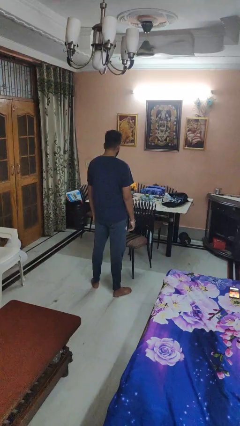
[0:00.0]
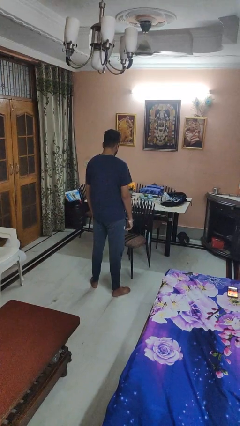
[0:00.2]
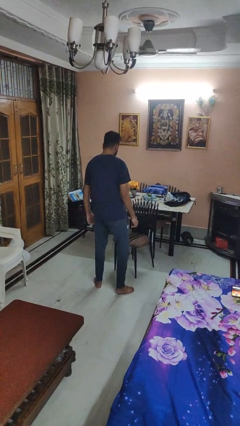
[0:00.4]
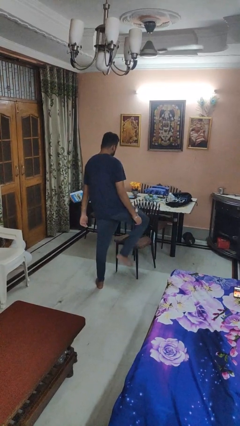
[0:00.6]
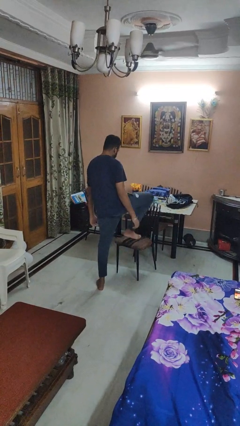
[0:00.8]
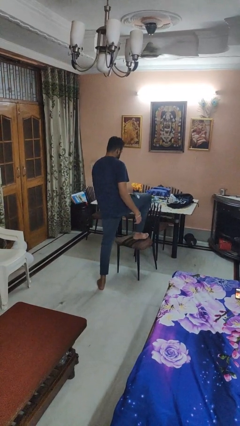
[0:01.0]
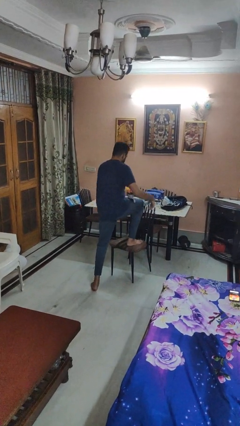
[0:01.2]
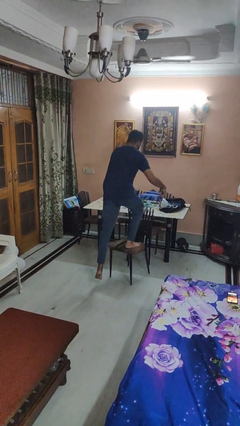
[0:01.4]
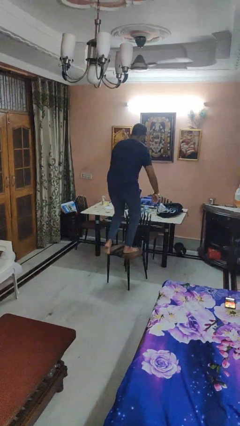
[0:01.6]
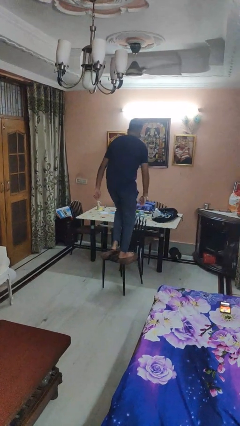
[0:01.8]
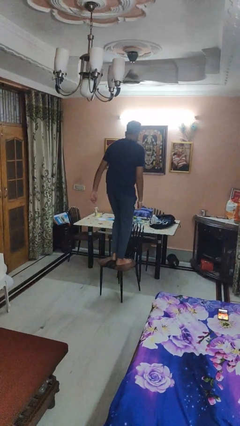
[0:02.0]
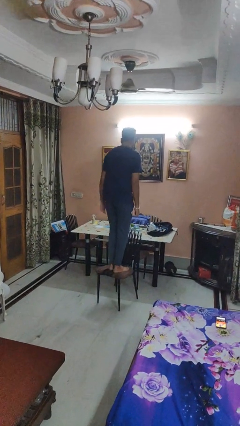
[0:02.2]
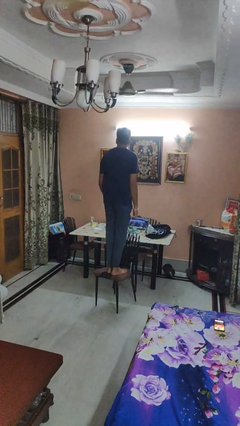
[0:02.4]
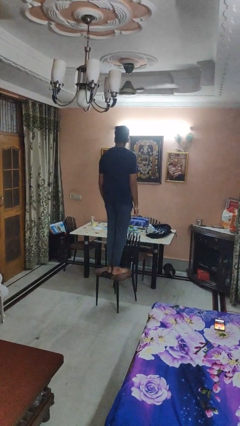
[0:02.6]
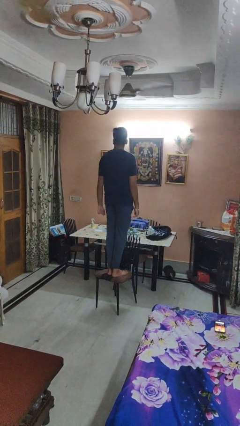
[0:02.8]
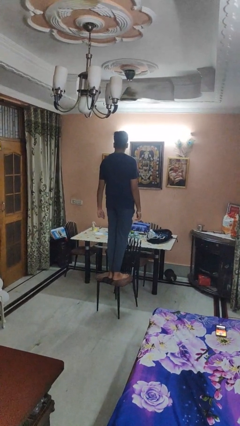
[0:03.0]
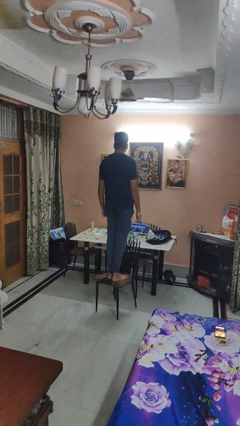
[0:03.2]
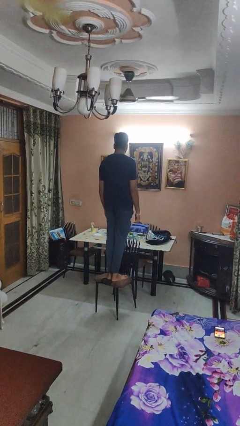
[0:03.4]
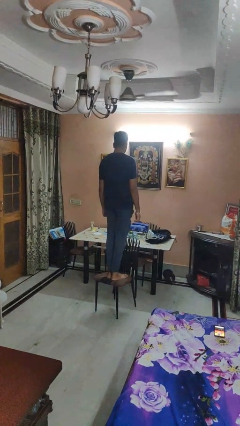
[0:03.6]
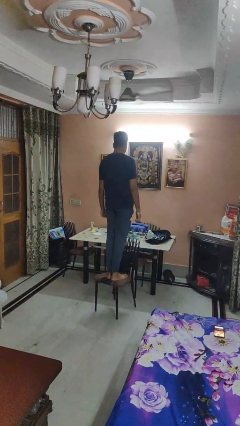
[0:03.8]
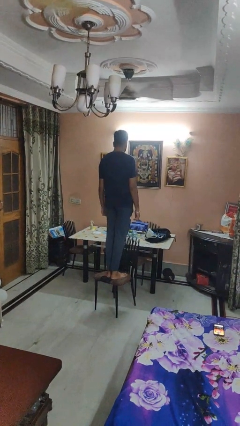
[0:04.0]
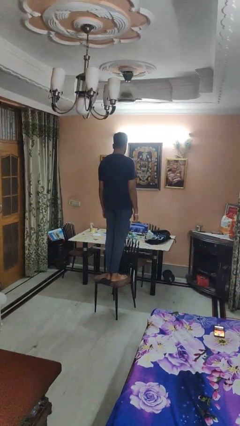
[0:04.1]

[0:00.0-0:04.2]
person climbs on chair

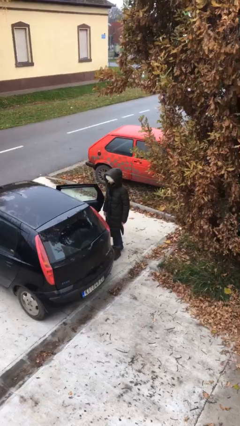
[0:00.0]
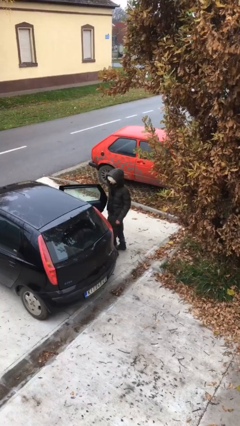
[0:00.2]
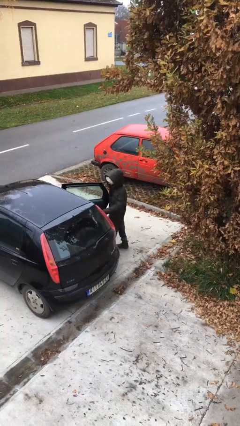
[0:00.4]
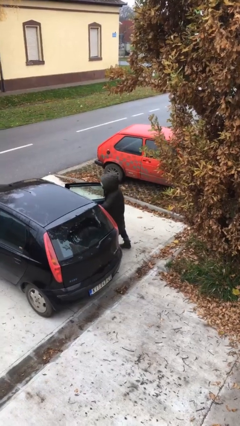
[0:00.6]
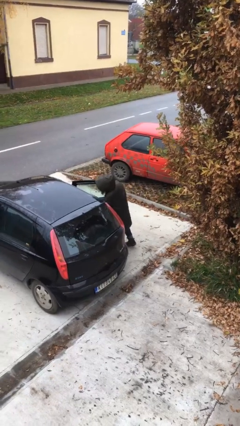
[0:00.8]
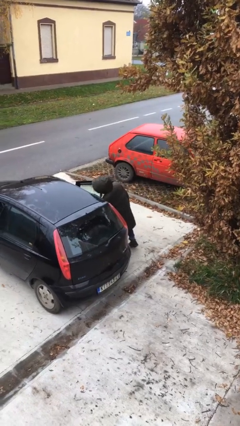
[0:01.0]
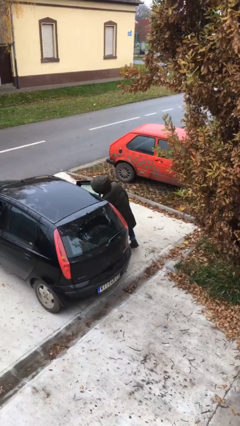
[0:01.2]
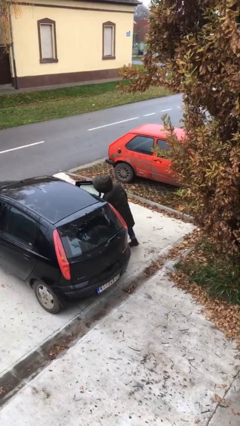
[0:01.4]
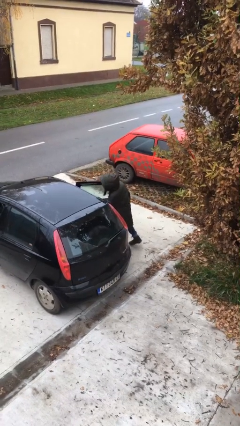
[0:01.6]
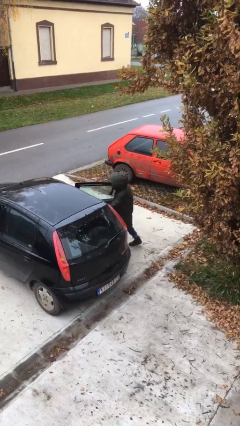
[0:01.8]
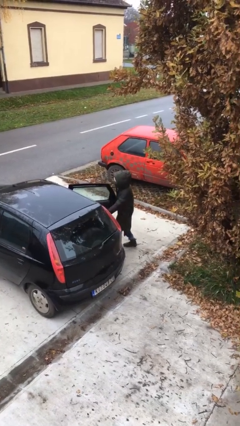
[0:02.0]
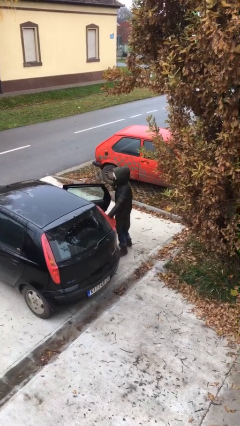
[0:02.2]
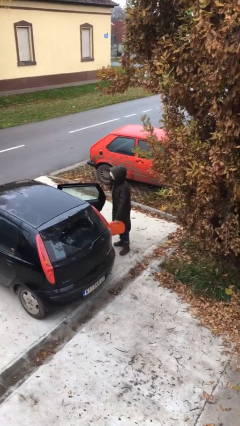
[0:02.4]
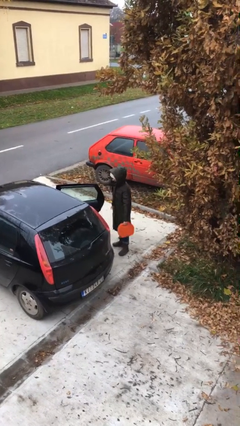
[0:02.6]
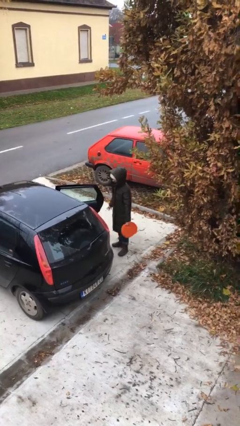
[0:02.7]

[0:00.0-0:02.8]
person unloads car

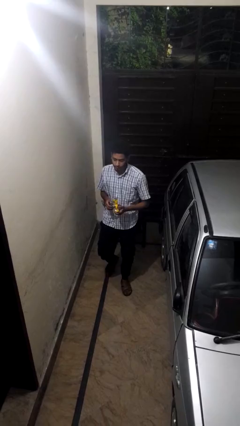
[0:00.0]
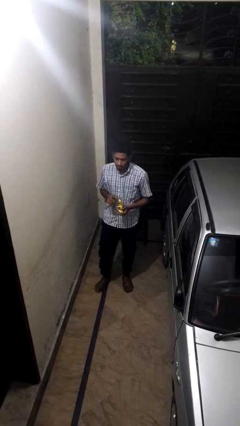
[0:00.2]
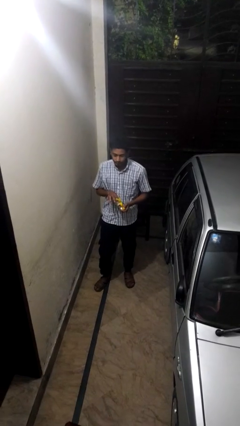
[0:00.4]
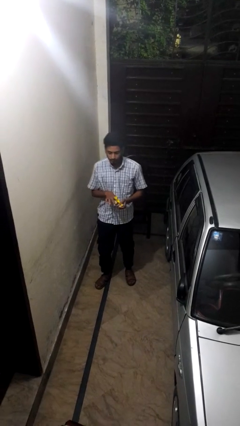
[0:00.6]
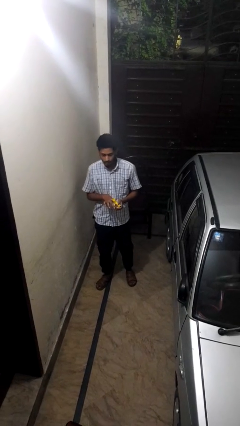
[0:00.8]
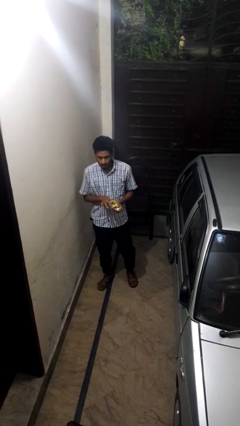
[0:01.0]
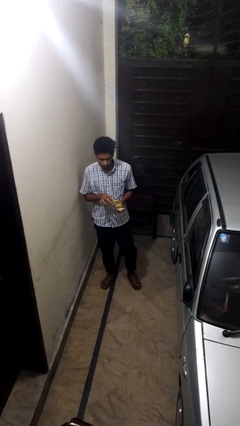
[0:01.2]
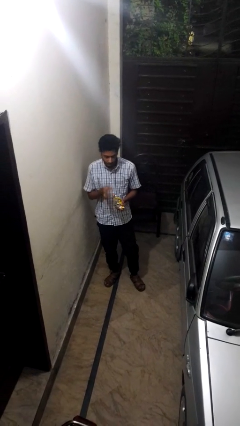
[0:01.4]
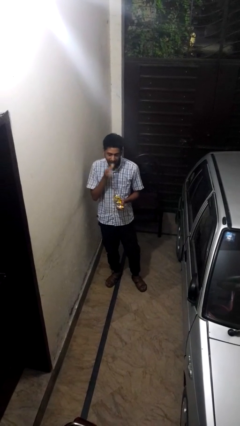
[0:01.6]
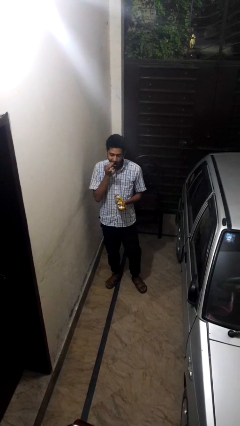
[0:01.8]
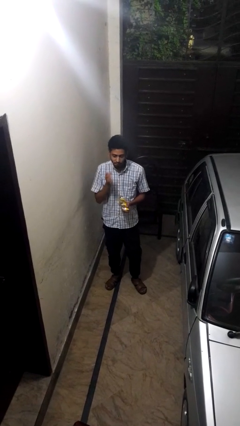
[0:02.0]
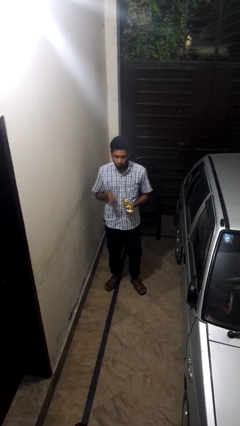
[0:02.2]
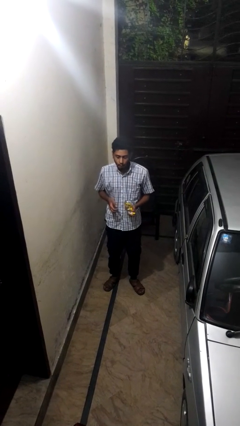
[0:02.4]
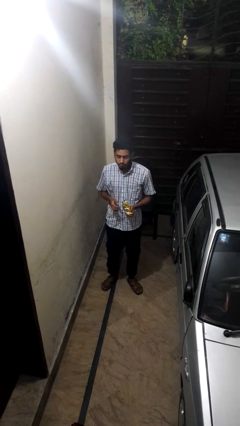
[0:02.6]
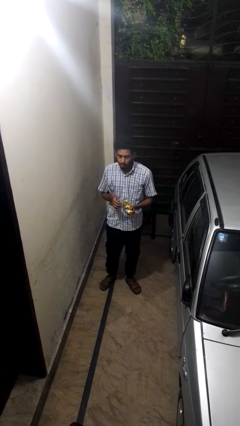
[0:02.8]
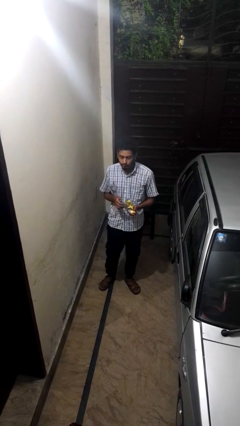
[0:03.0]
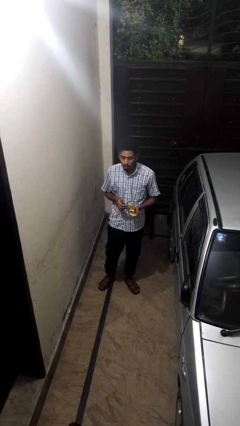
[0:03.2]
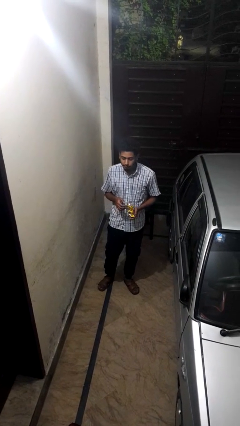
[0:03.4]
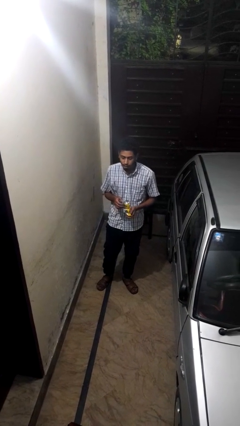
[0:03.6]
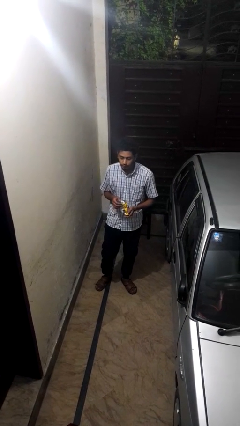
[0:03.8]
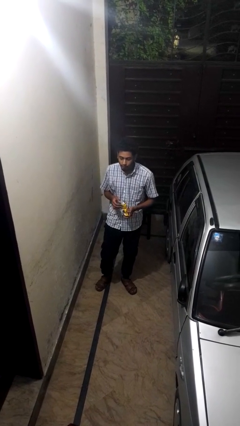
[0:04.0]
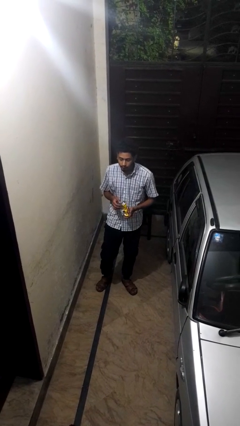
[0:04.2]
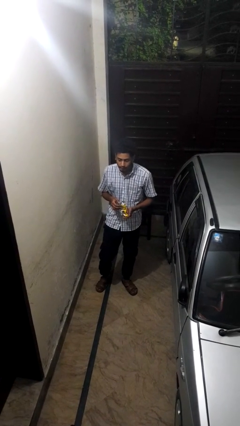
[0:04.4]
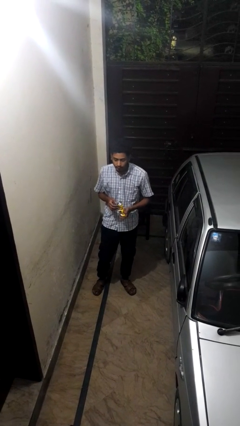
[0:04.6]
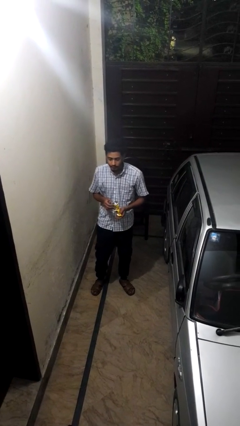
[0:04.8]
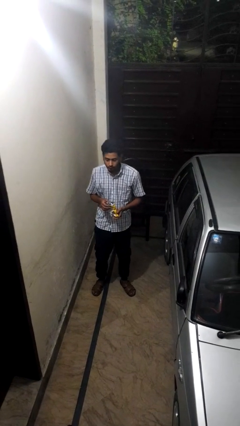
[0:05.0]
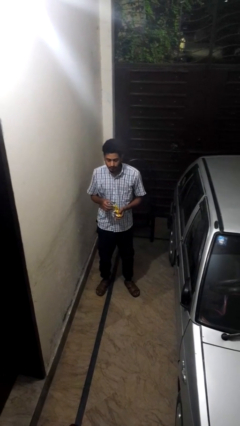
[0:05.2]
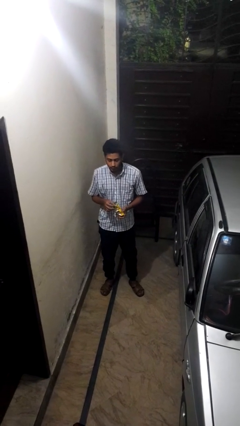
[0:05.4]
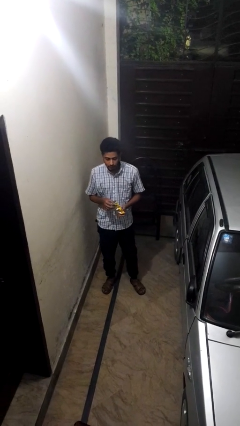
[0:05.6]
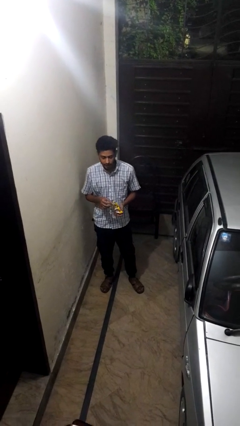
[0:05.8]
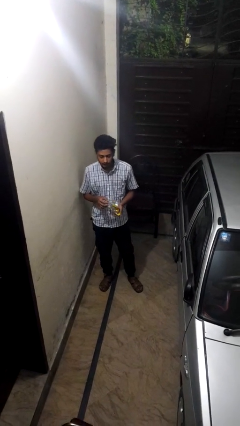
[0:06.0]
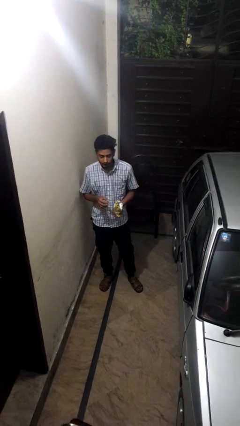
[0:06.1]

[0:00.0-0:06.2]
person eats snack from bag

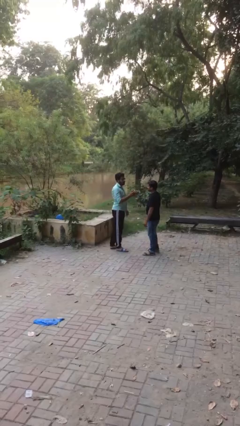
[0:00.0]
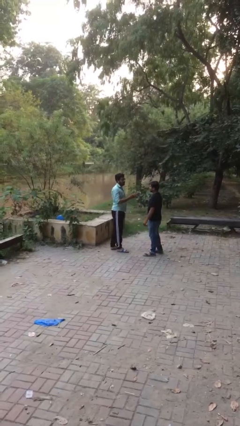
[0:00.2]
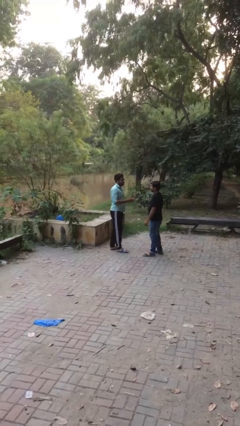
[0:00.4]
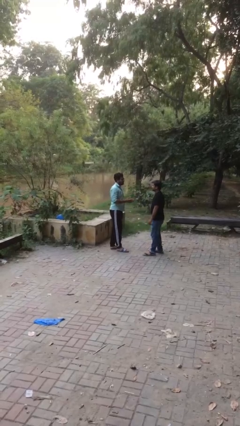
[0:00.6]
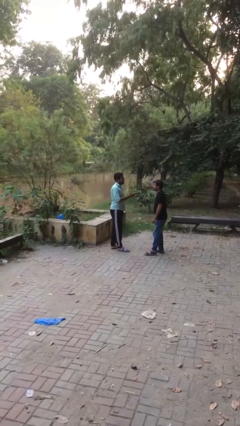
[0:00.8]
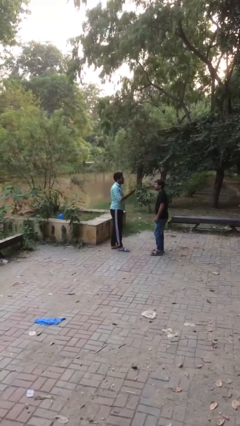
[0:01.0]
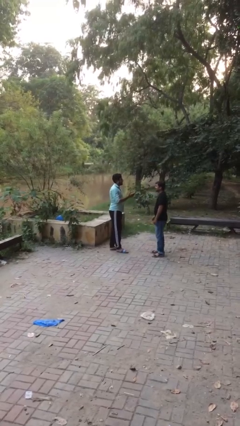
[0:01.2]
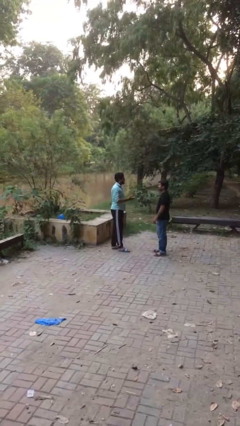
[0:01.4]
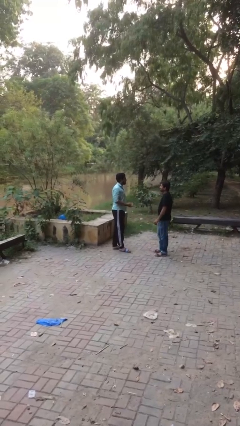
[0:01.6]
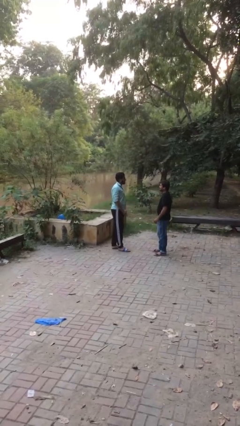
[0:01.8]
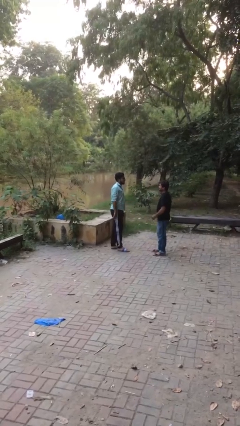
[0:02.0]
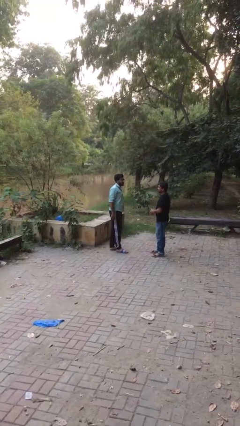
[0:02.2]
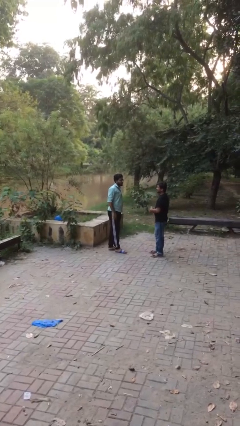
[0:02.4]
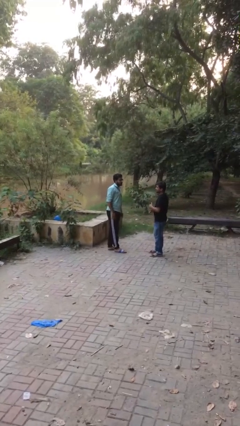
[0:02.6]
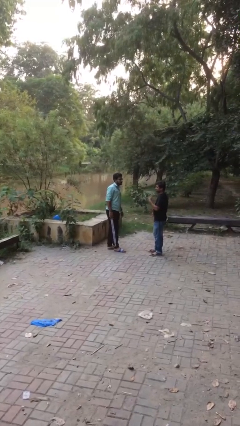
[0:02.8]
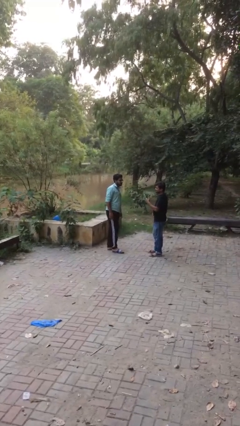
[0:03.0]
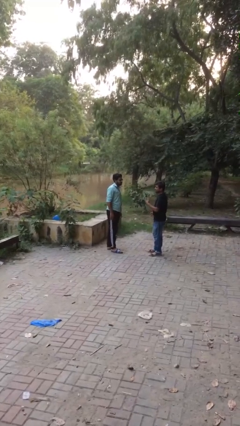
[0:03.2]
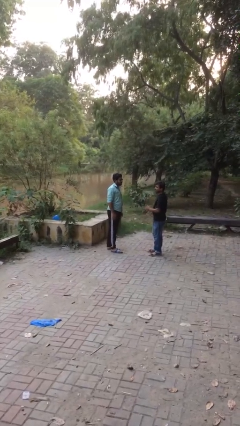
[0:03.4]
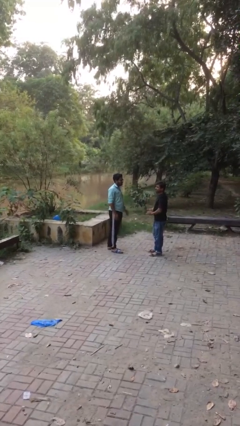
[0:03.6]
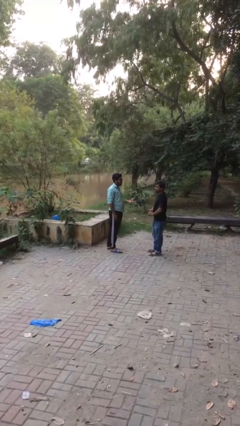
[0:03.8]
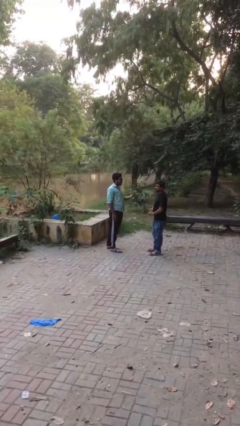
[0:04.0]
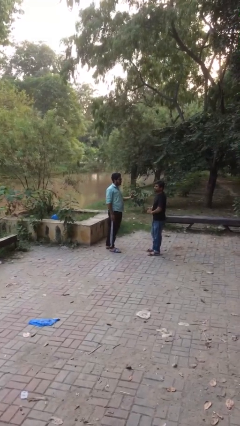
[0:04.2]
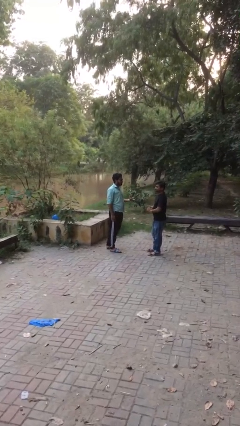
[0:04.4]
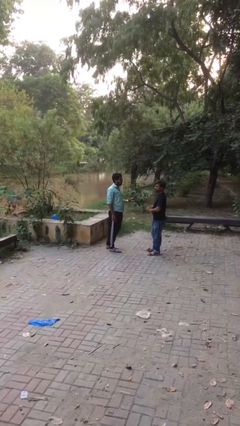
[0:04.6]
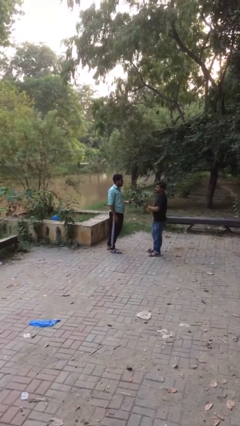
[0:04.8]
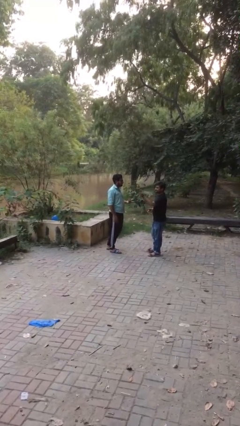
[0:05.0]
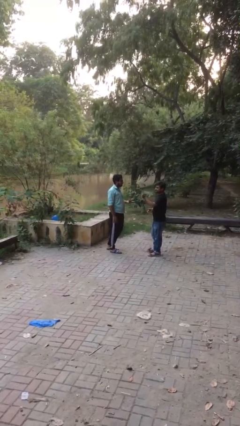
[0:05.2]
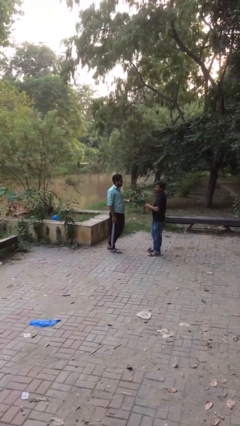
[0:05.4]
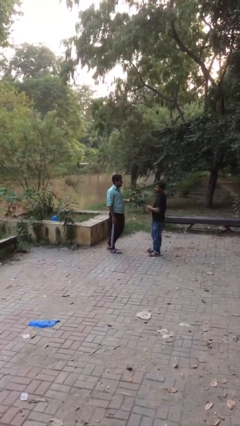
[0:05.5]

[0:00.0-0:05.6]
person talks to person
